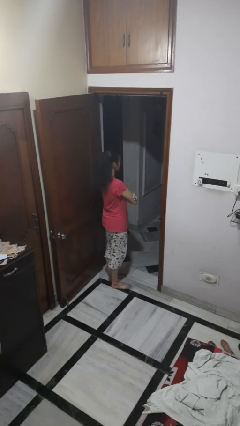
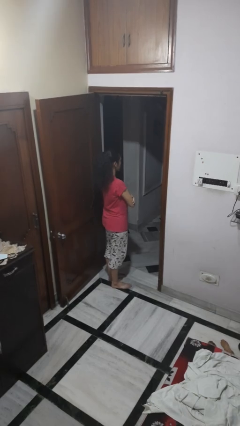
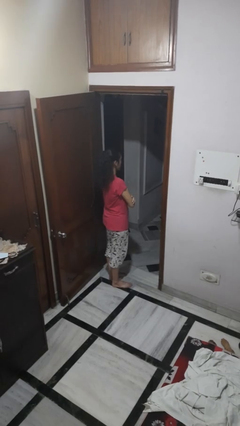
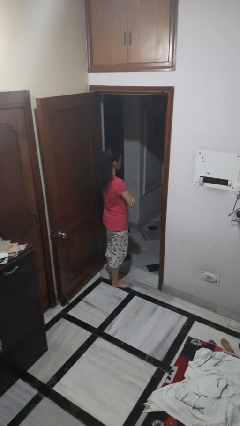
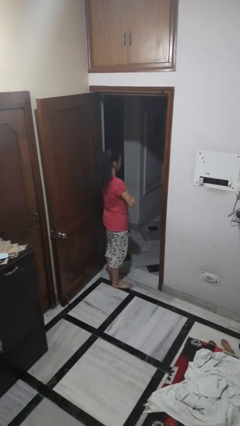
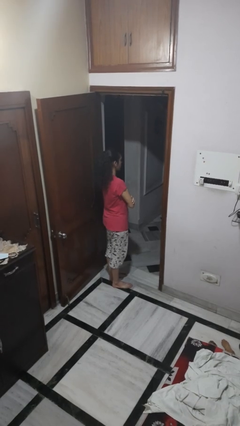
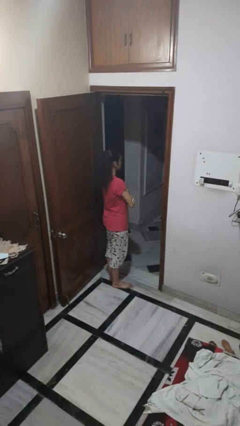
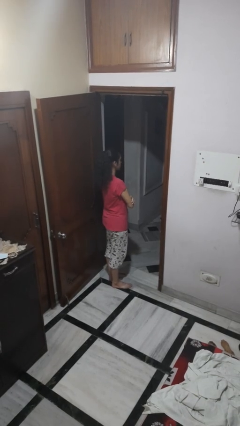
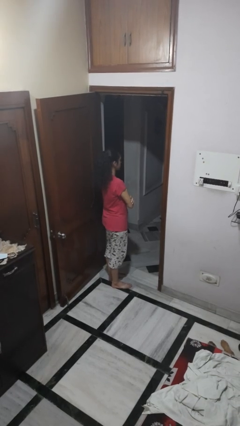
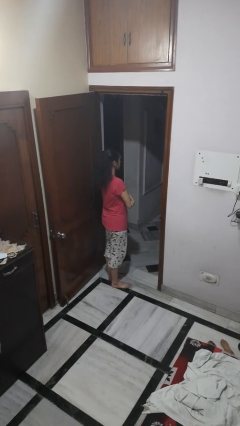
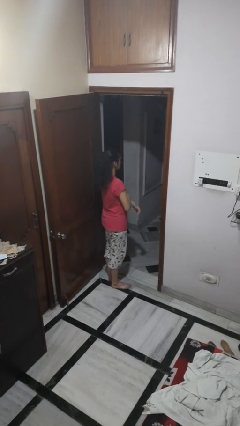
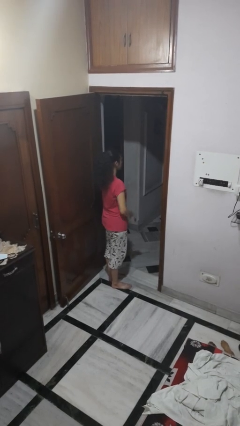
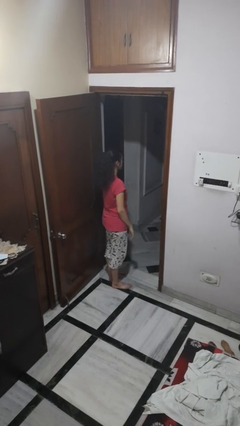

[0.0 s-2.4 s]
person crosses arms

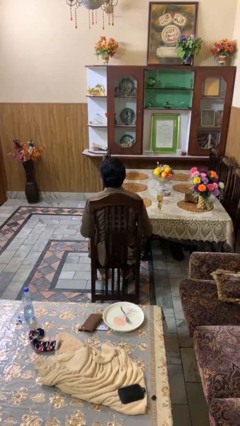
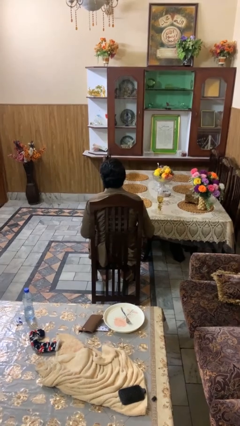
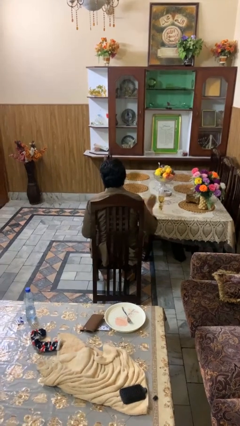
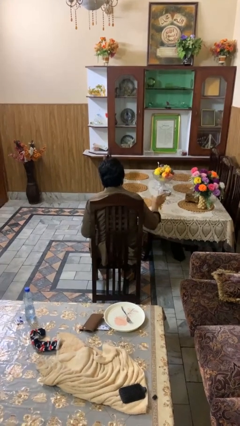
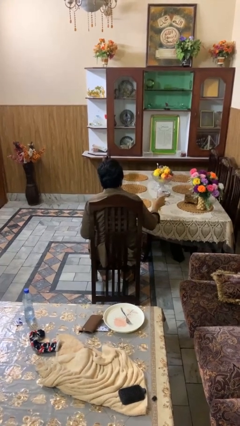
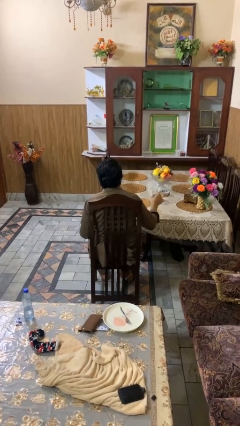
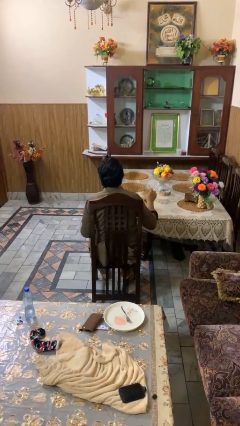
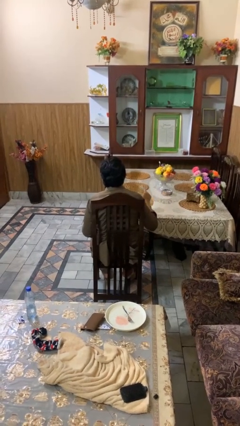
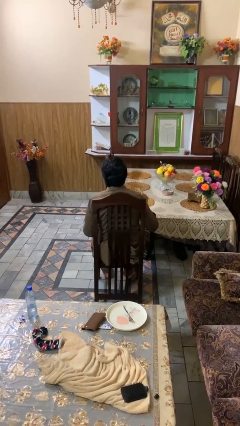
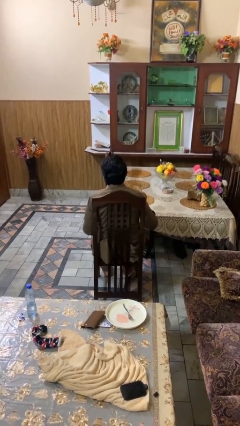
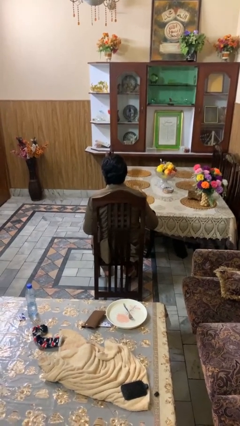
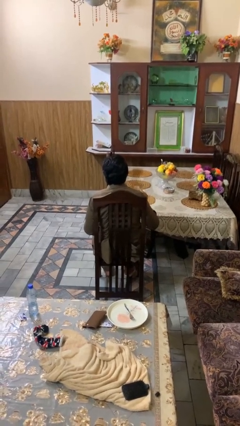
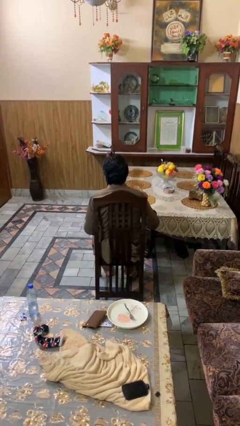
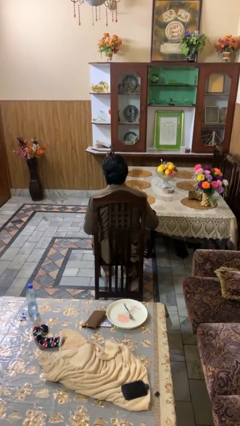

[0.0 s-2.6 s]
person picks up object from table

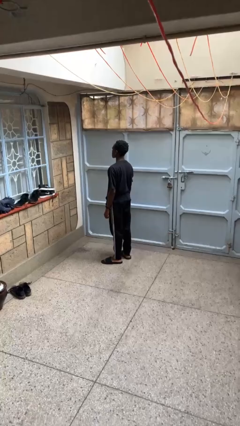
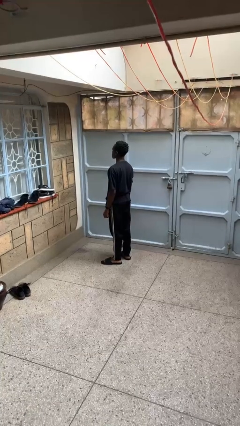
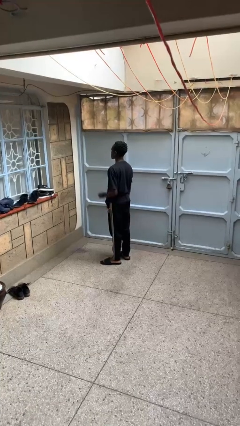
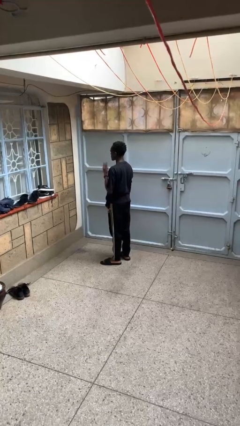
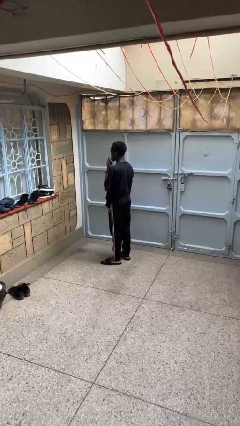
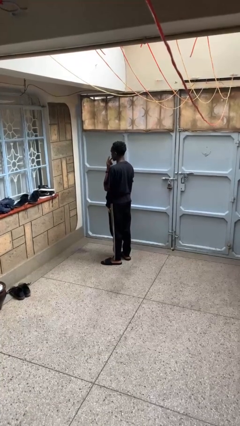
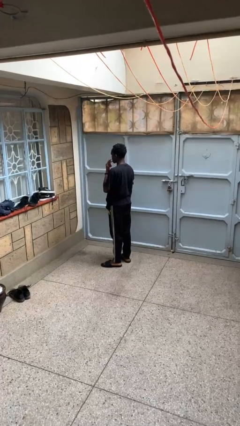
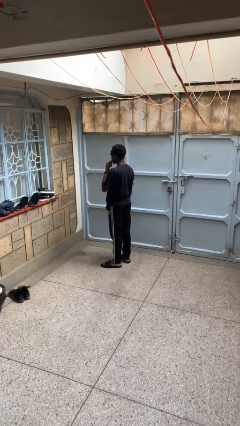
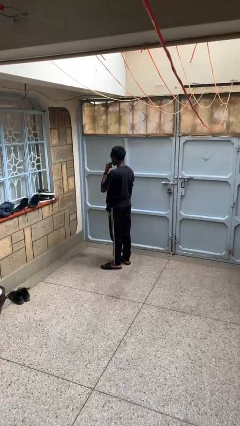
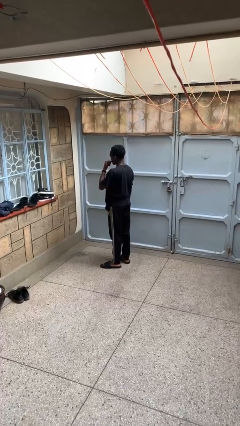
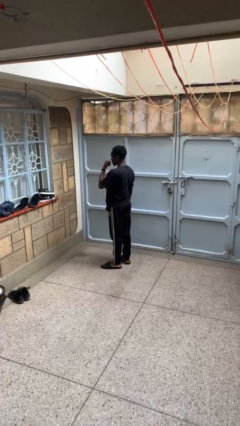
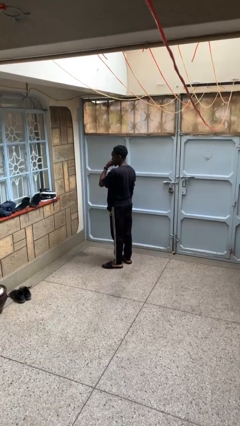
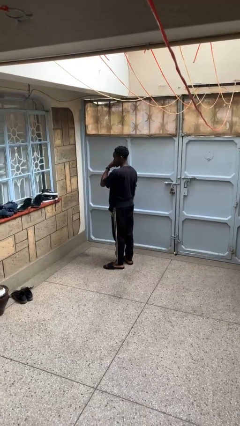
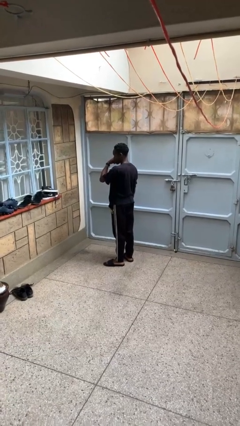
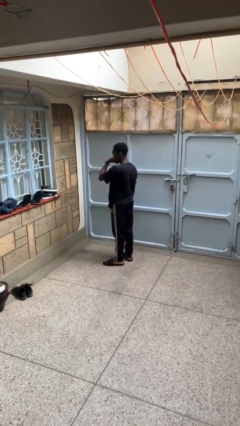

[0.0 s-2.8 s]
person licks fingers

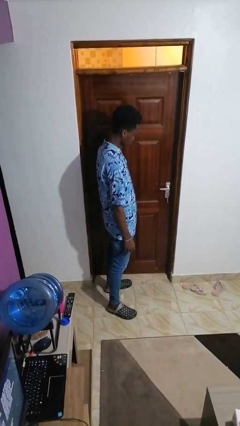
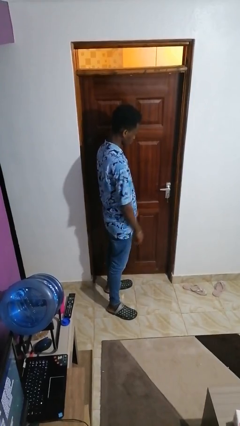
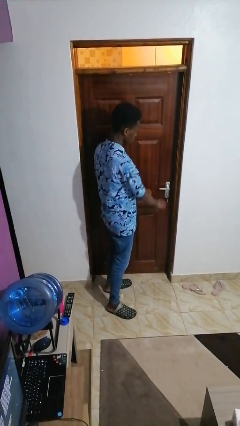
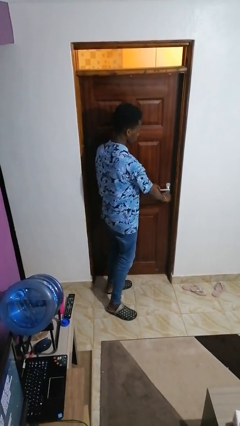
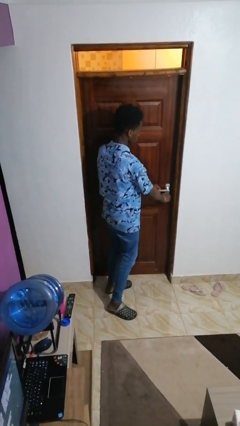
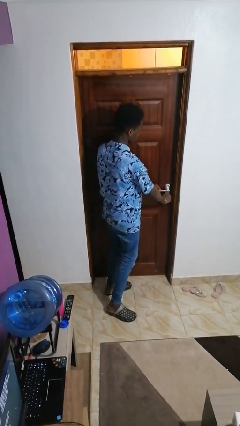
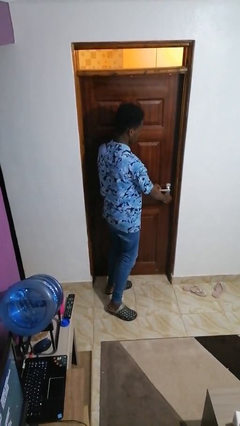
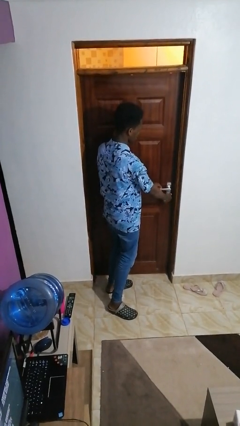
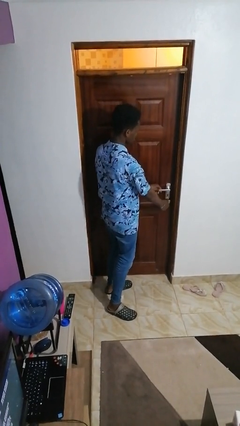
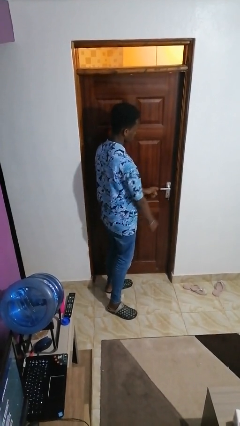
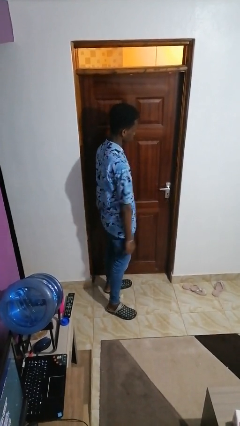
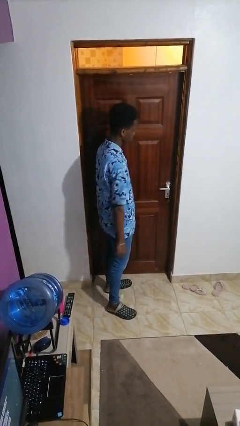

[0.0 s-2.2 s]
person locks door with keys

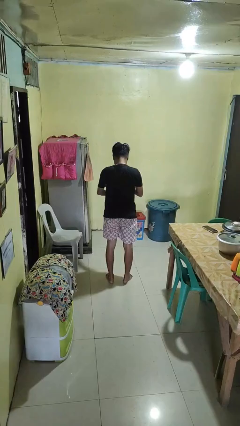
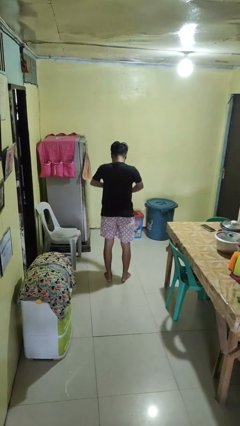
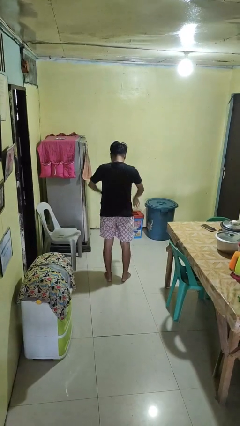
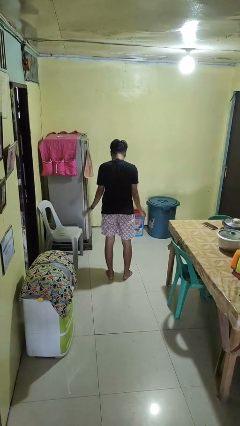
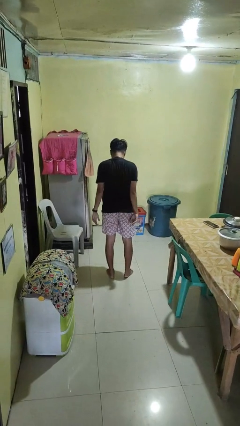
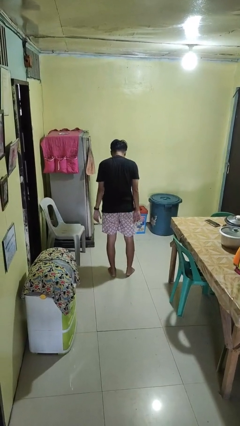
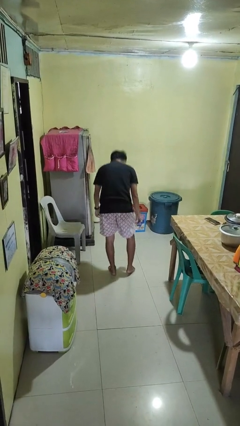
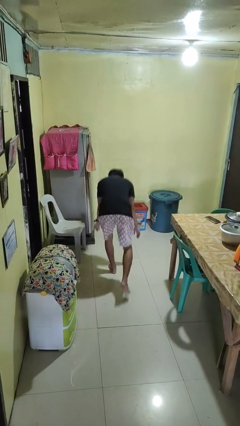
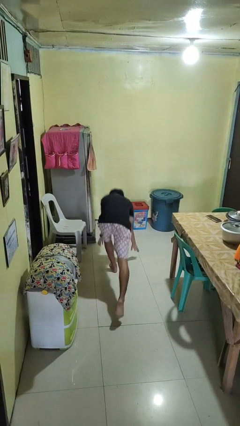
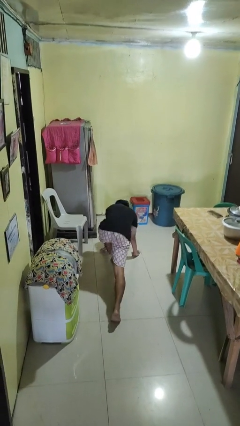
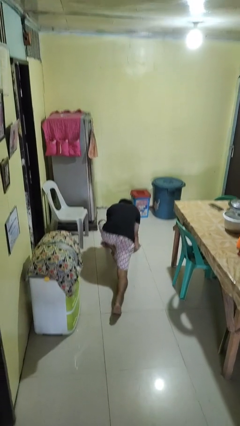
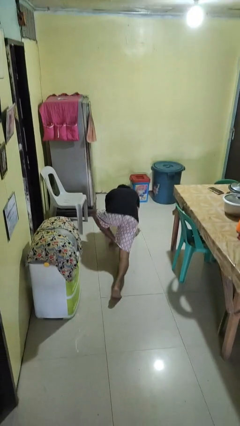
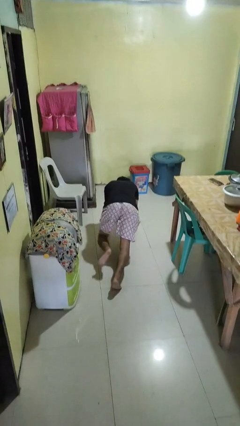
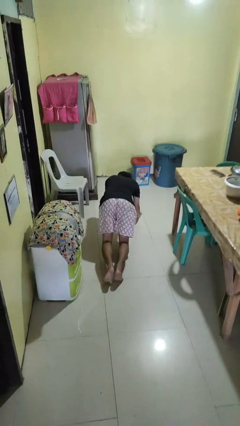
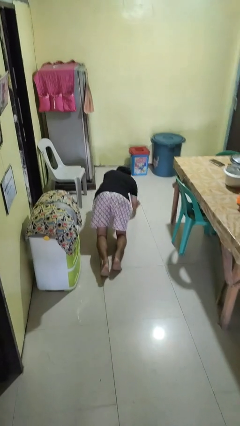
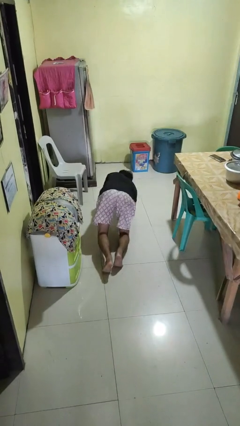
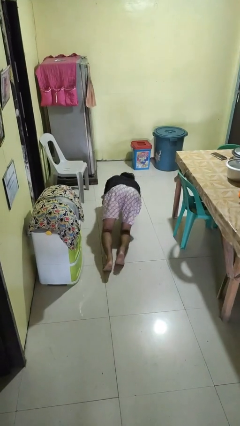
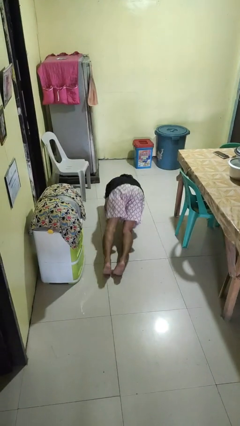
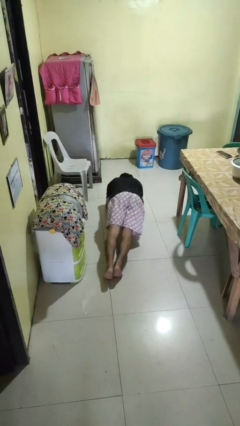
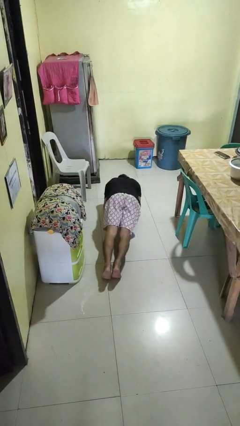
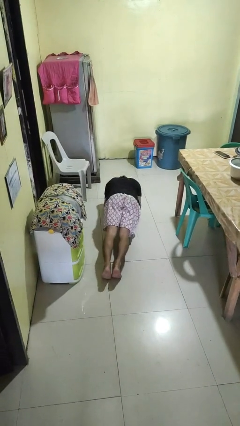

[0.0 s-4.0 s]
person exercises with plank

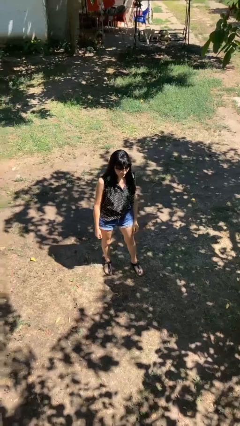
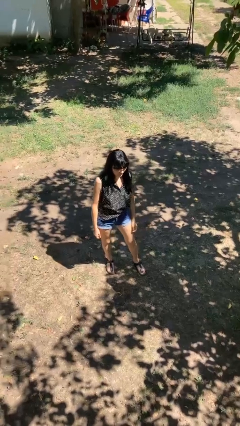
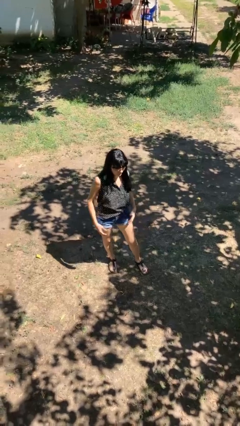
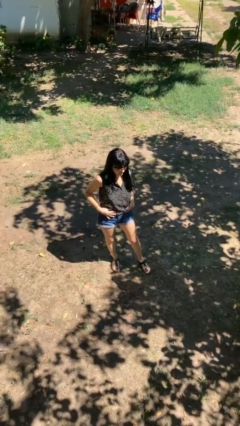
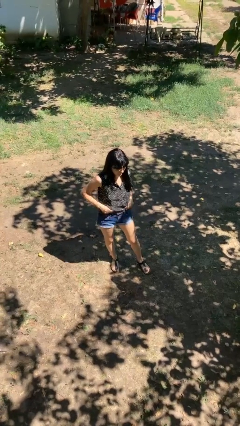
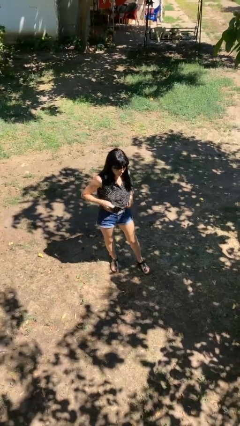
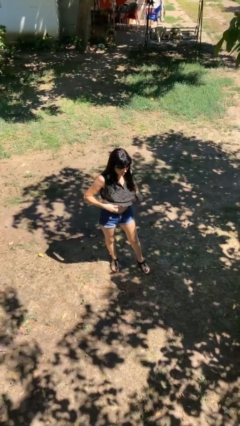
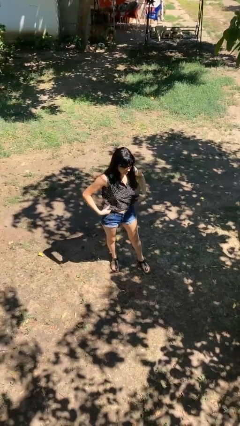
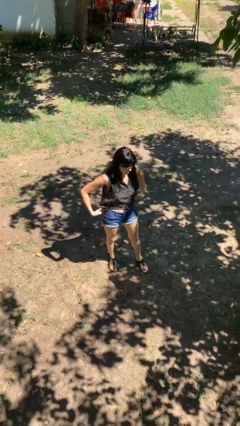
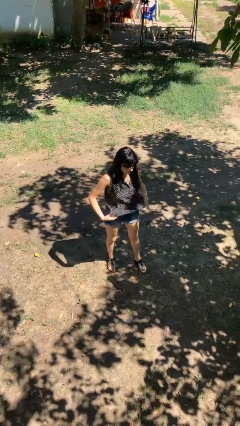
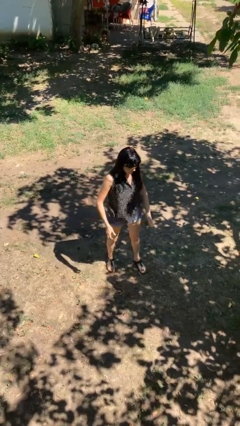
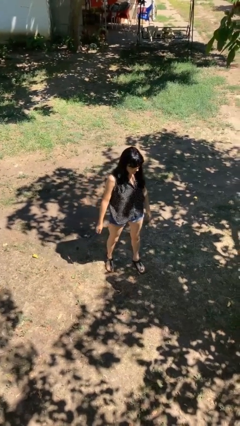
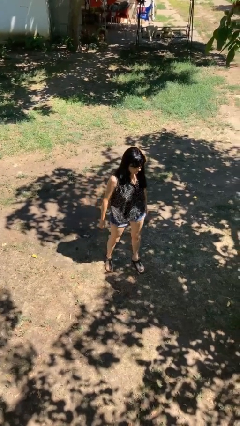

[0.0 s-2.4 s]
person untucks shirt

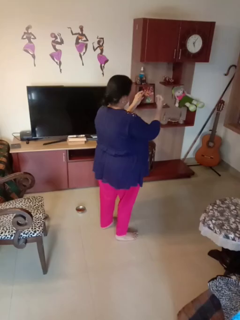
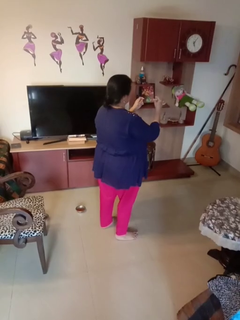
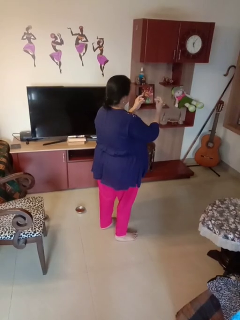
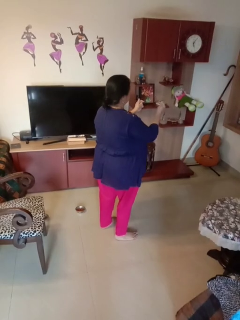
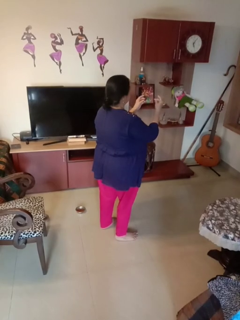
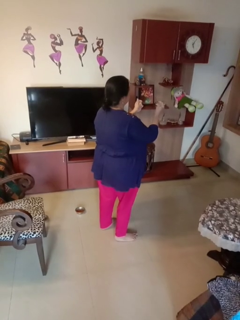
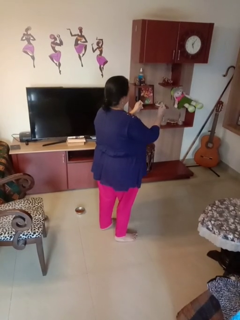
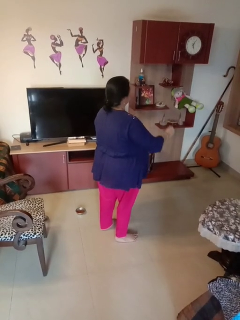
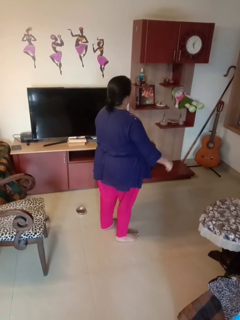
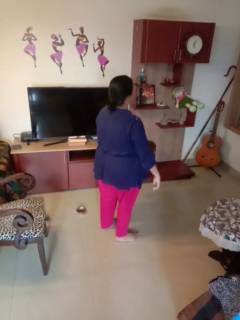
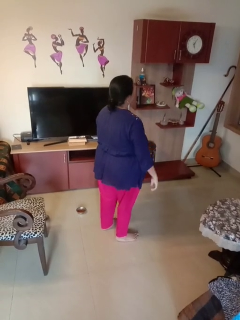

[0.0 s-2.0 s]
person snaps fingers
